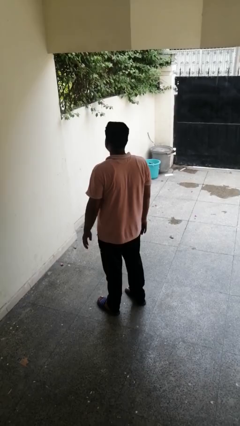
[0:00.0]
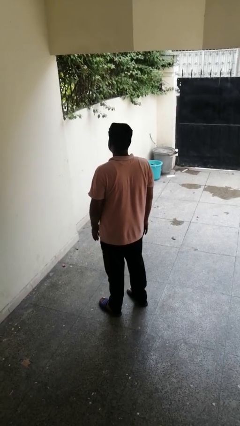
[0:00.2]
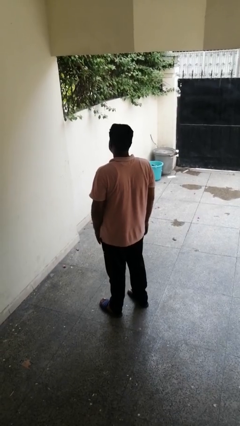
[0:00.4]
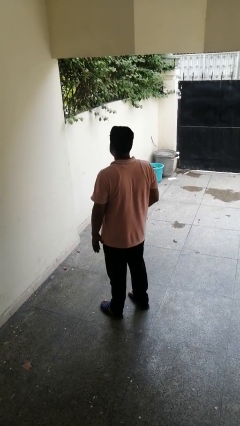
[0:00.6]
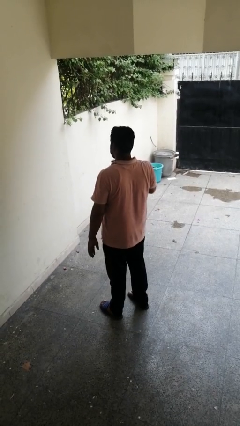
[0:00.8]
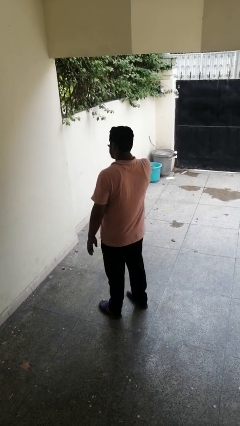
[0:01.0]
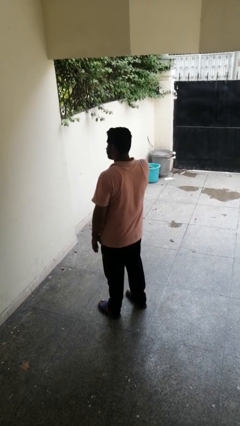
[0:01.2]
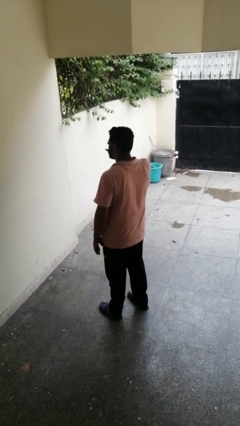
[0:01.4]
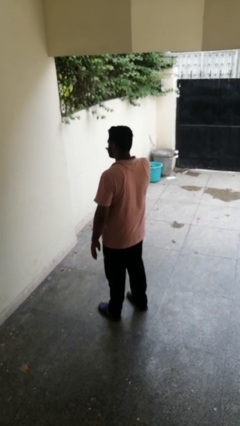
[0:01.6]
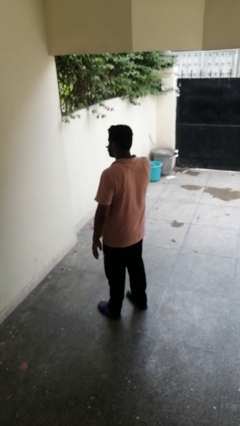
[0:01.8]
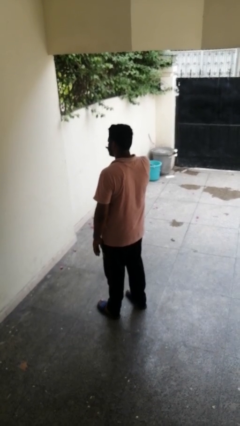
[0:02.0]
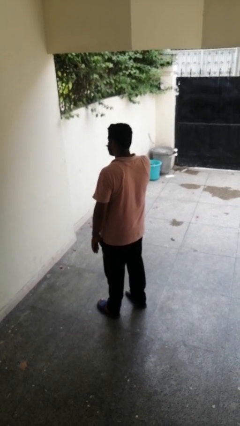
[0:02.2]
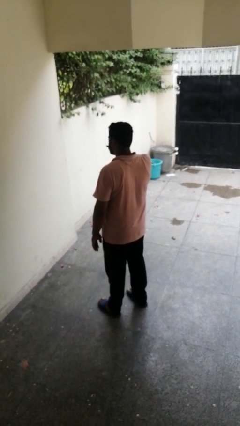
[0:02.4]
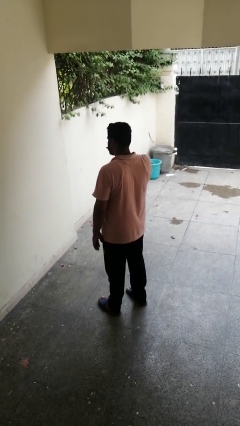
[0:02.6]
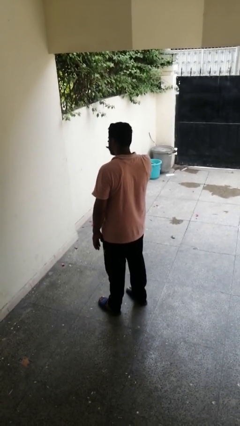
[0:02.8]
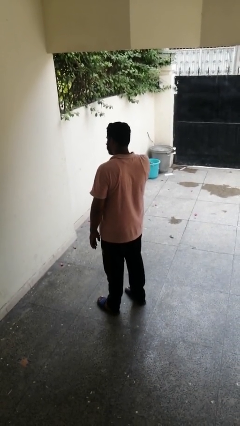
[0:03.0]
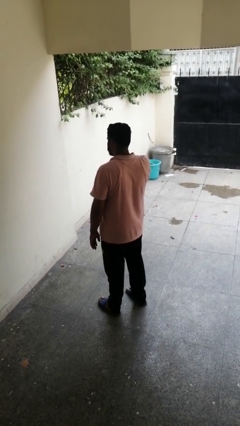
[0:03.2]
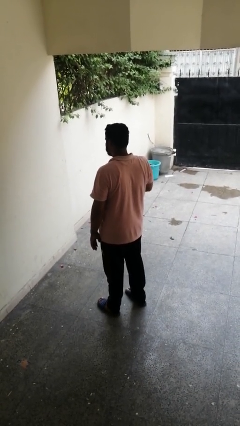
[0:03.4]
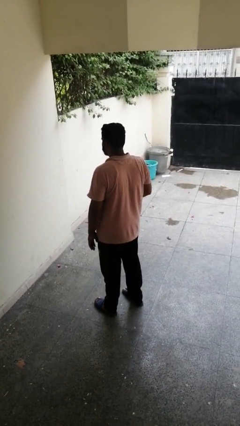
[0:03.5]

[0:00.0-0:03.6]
person rubs eyes

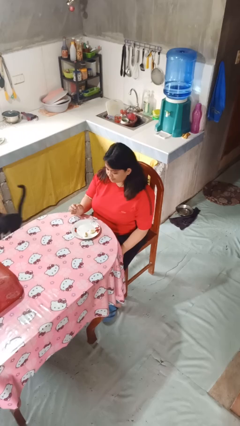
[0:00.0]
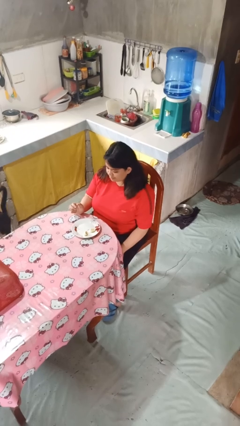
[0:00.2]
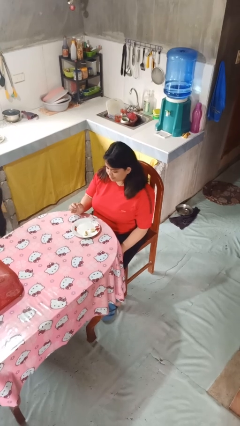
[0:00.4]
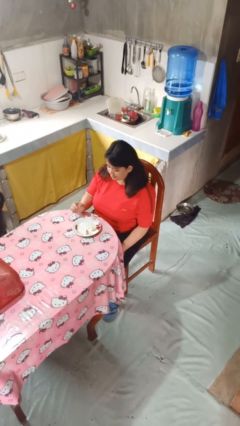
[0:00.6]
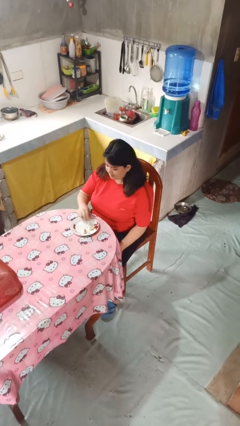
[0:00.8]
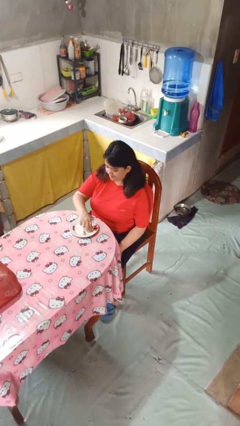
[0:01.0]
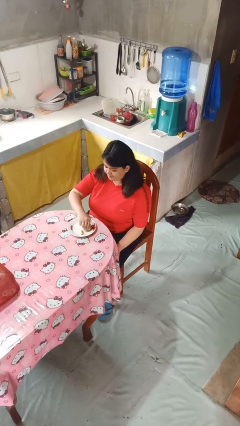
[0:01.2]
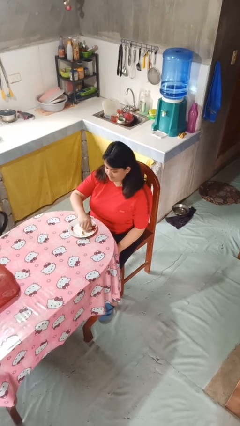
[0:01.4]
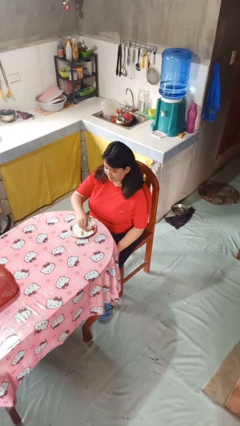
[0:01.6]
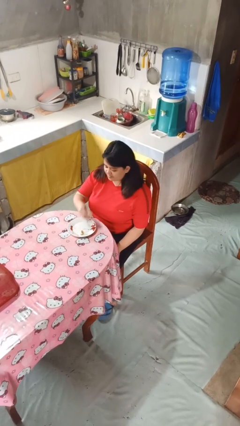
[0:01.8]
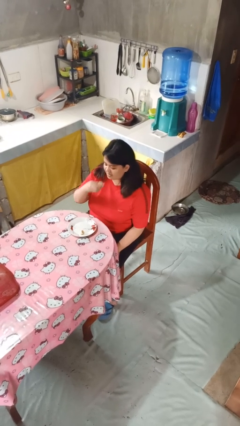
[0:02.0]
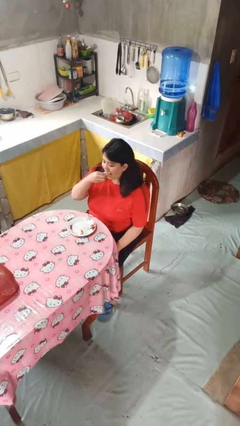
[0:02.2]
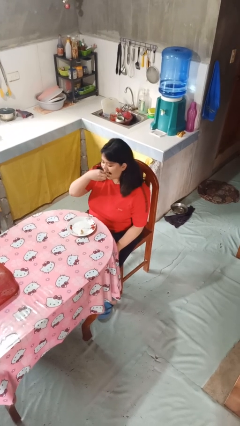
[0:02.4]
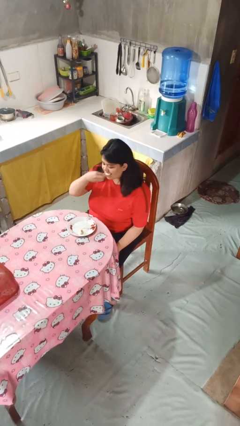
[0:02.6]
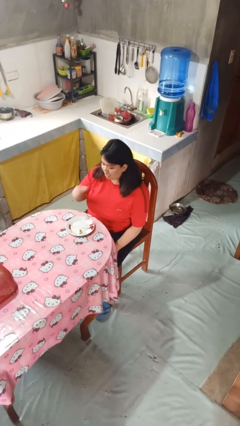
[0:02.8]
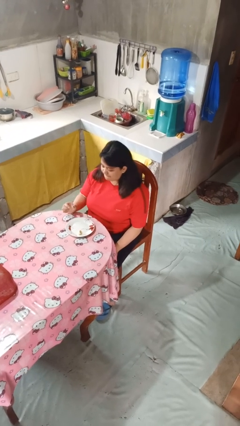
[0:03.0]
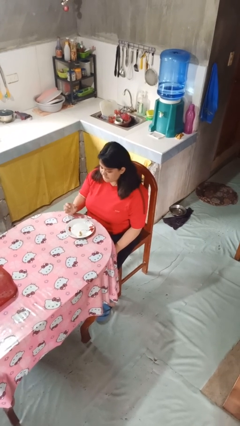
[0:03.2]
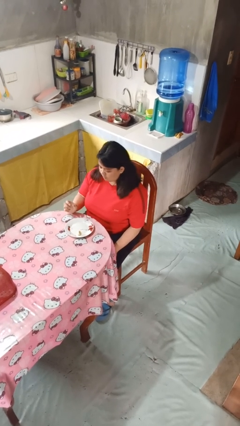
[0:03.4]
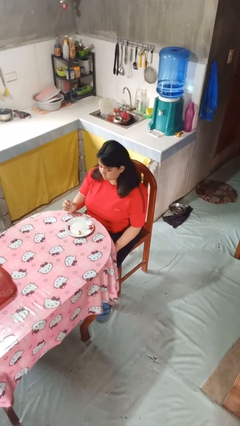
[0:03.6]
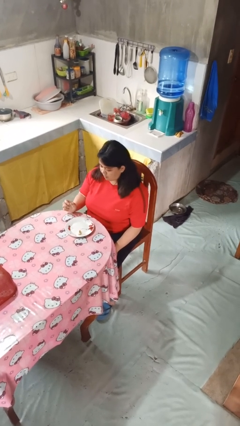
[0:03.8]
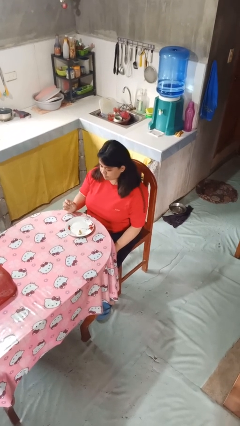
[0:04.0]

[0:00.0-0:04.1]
person eats with hands

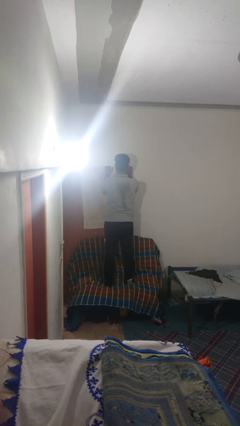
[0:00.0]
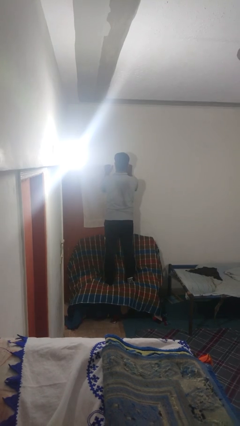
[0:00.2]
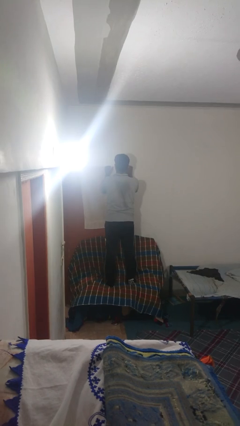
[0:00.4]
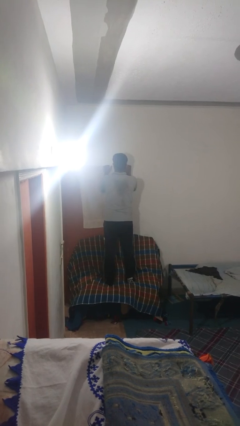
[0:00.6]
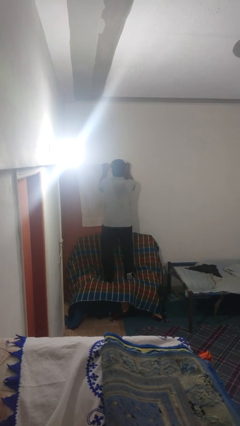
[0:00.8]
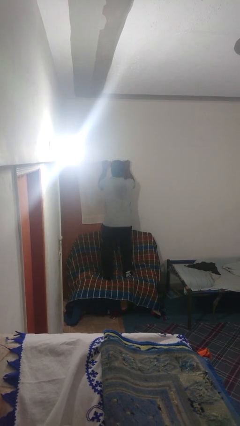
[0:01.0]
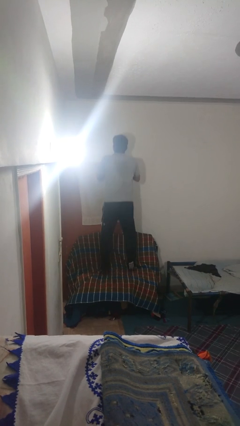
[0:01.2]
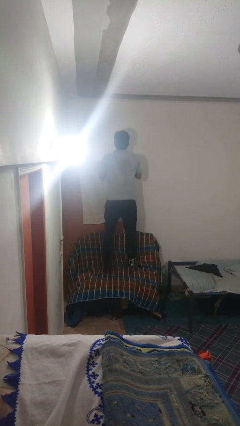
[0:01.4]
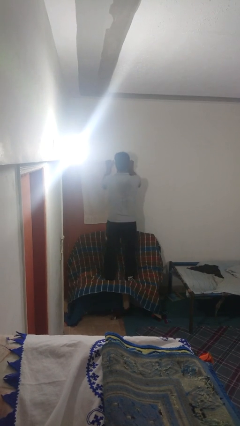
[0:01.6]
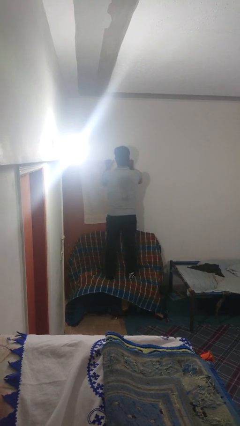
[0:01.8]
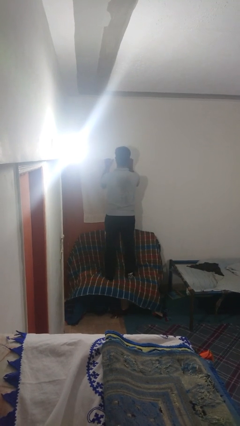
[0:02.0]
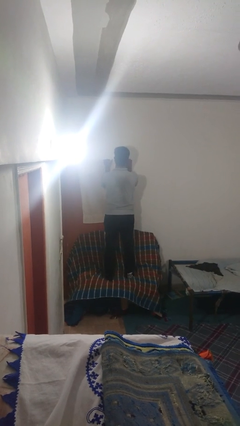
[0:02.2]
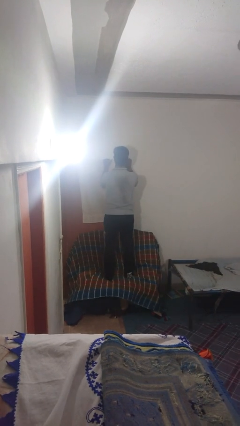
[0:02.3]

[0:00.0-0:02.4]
person jumps on couch

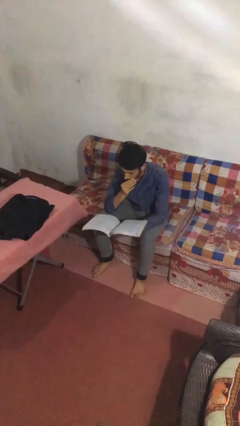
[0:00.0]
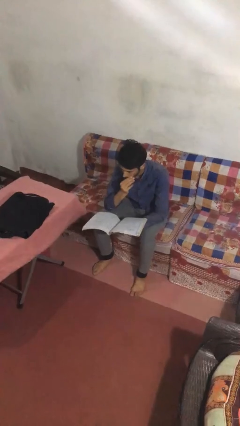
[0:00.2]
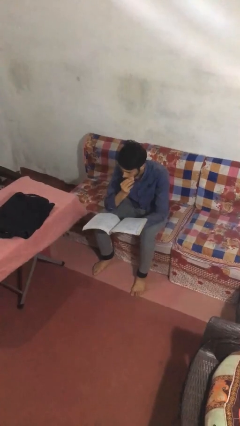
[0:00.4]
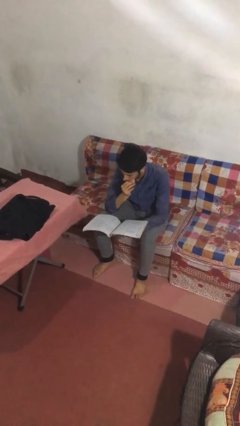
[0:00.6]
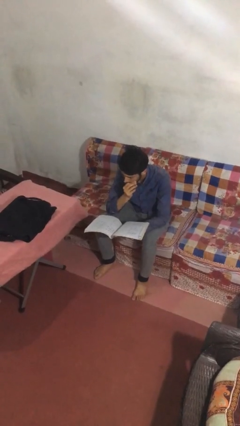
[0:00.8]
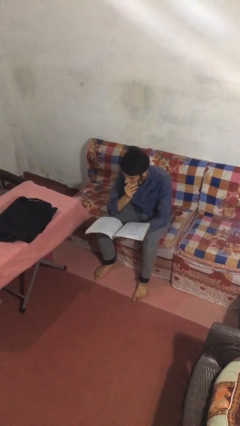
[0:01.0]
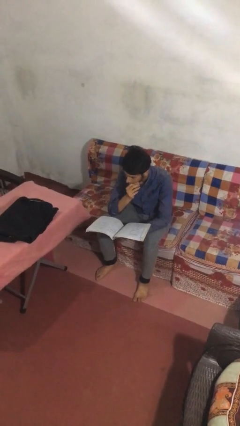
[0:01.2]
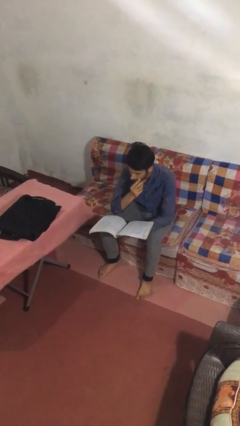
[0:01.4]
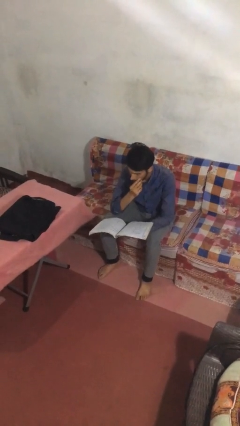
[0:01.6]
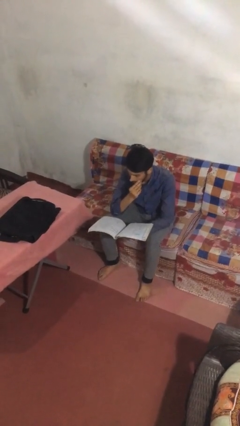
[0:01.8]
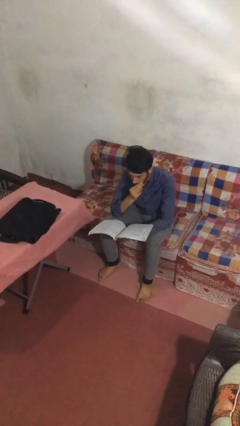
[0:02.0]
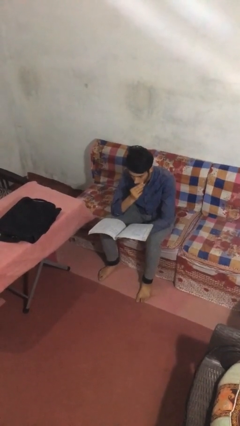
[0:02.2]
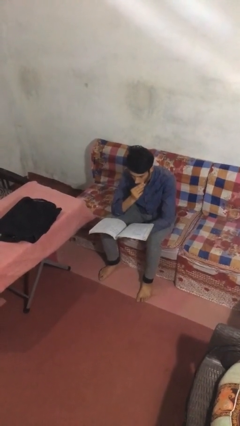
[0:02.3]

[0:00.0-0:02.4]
person reads document

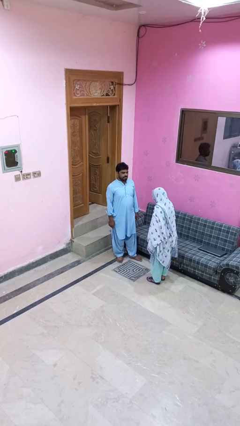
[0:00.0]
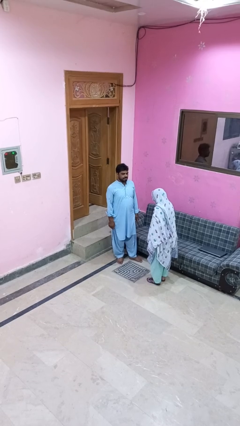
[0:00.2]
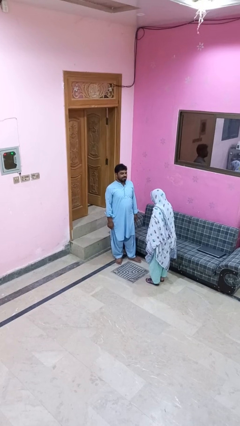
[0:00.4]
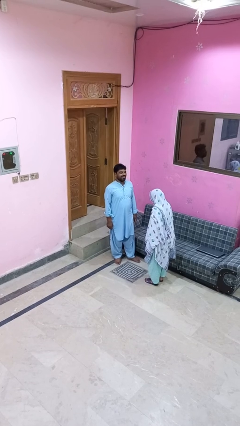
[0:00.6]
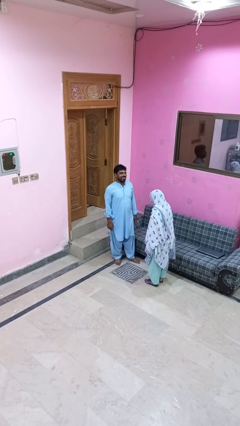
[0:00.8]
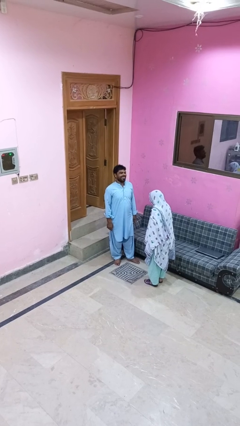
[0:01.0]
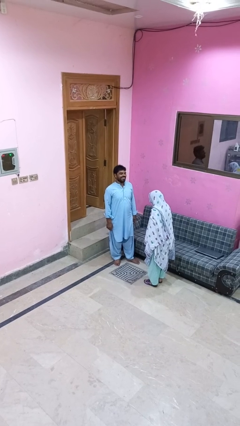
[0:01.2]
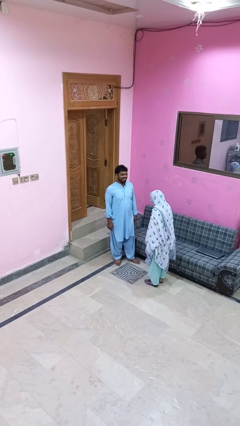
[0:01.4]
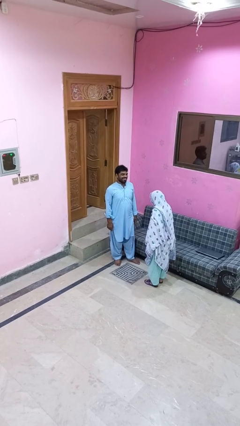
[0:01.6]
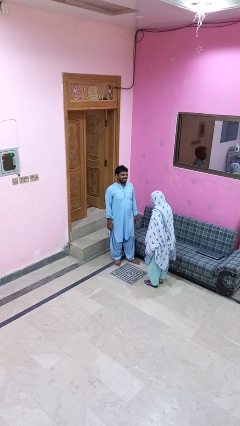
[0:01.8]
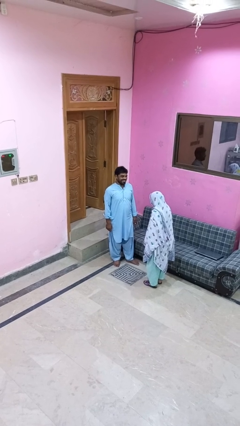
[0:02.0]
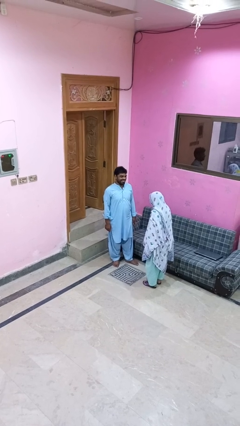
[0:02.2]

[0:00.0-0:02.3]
person laughs with person

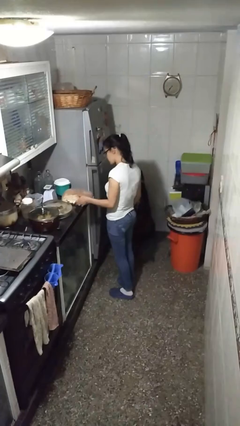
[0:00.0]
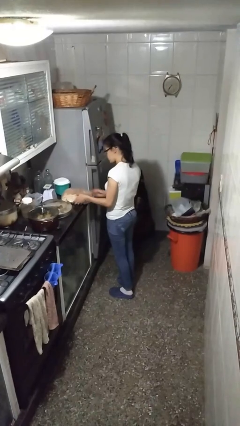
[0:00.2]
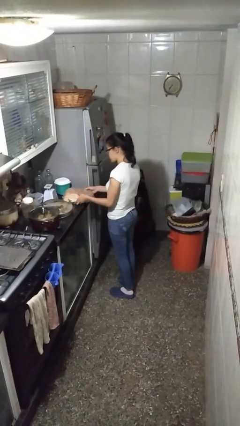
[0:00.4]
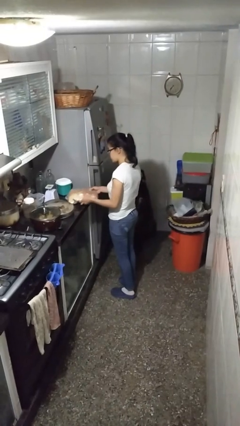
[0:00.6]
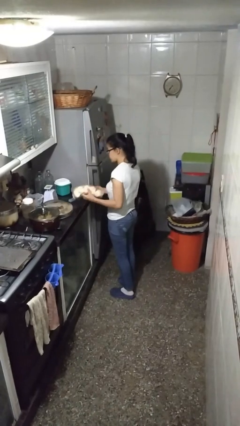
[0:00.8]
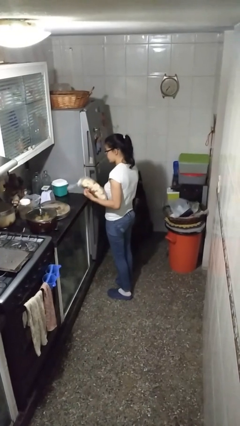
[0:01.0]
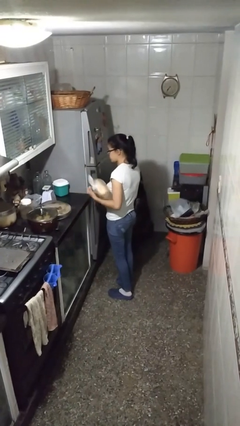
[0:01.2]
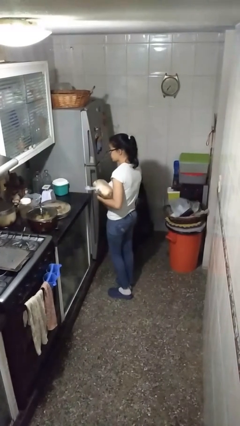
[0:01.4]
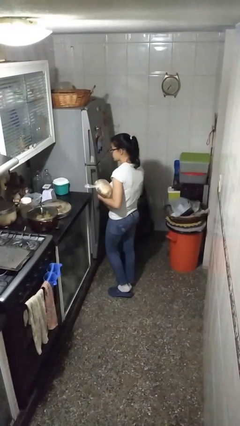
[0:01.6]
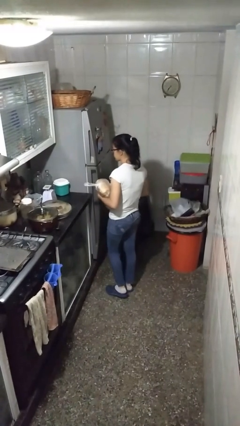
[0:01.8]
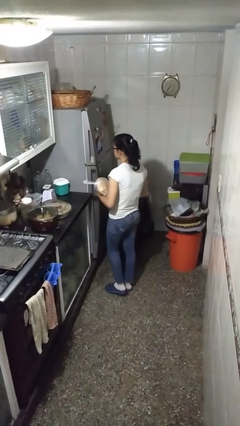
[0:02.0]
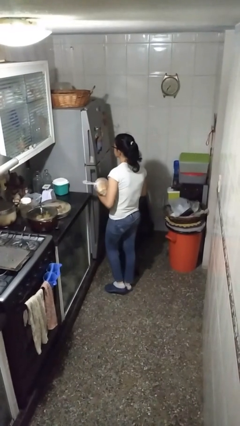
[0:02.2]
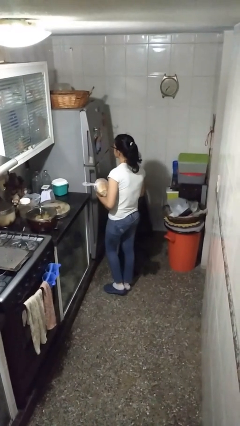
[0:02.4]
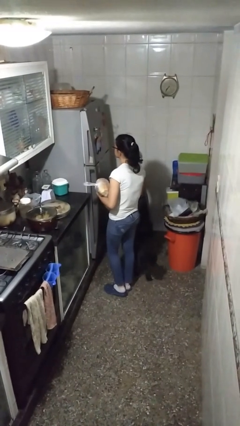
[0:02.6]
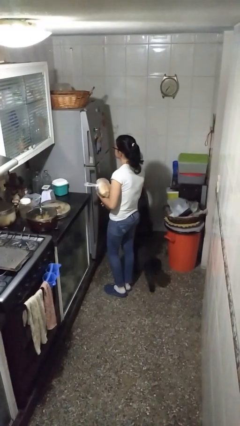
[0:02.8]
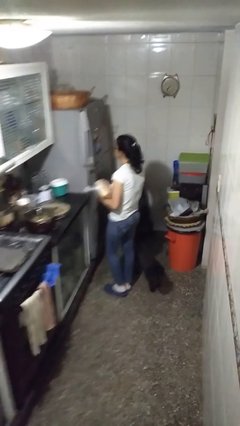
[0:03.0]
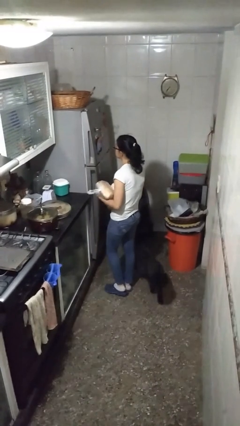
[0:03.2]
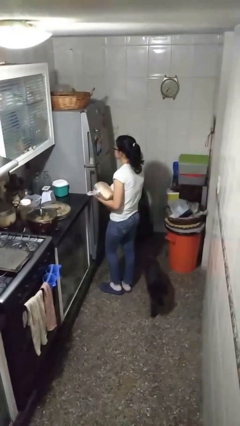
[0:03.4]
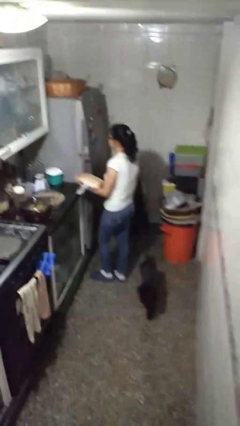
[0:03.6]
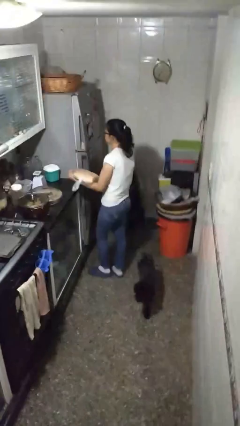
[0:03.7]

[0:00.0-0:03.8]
person picks up object from countertop
